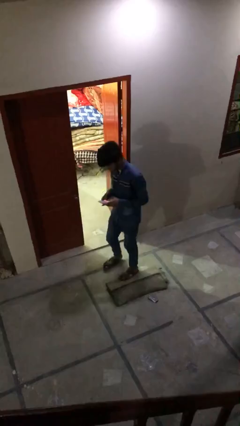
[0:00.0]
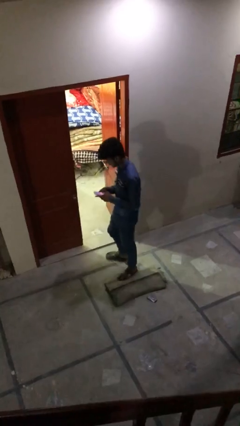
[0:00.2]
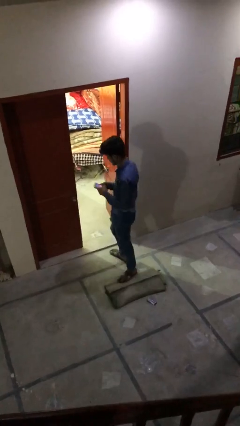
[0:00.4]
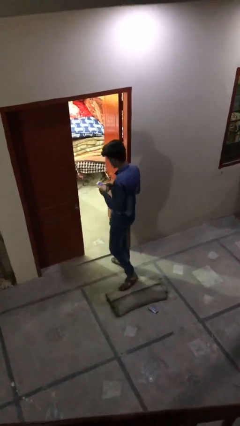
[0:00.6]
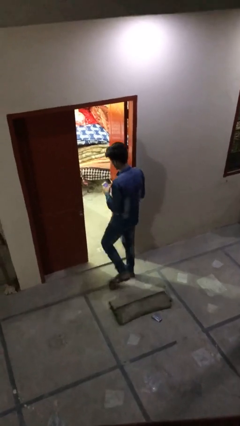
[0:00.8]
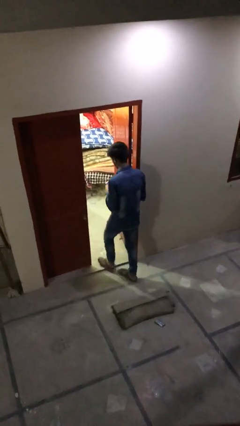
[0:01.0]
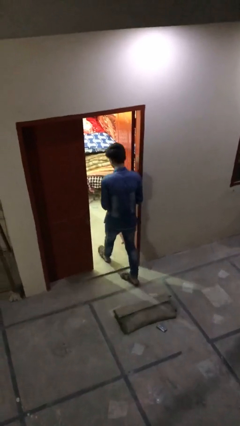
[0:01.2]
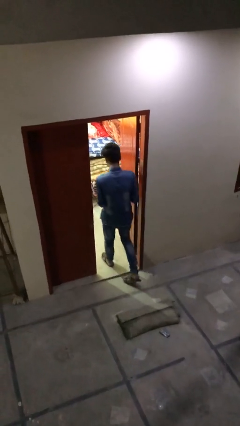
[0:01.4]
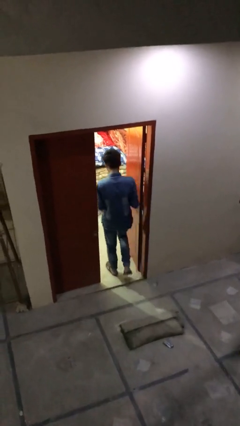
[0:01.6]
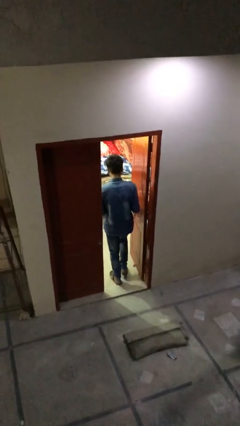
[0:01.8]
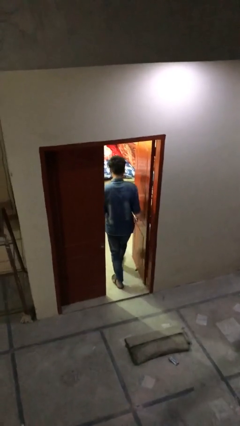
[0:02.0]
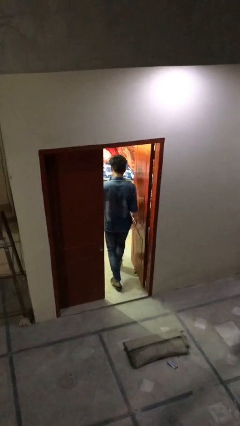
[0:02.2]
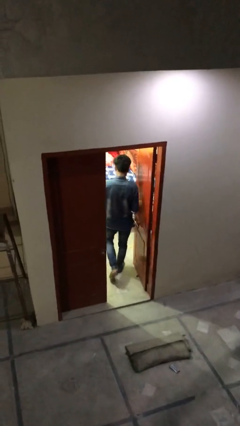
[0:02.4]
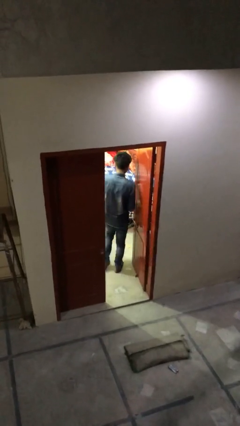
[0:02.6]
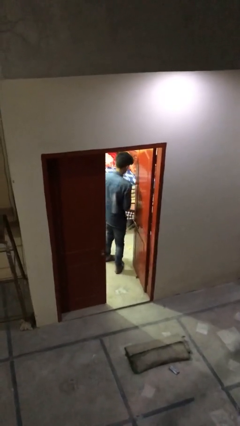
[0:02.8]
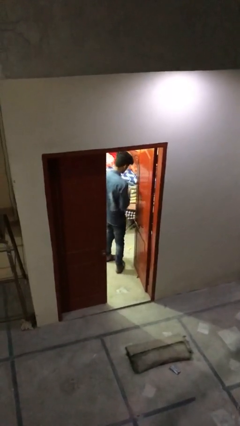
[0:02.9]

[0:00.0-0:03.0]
person exits scene through structure

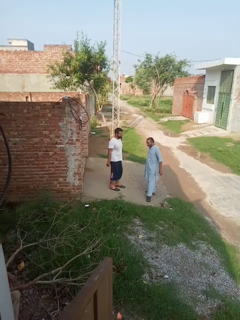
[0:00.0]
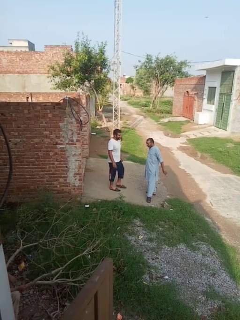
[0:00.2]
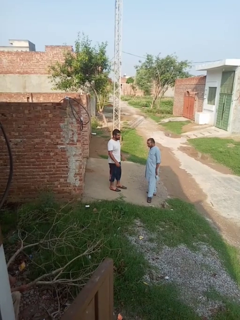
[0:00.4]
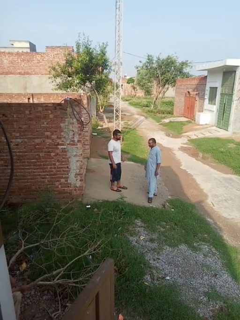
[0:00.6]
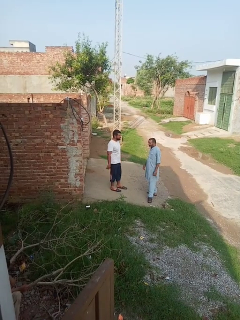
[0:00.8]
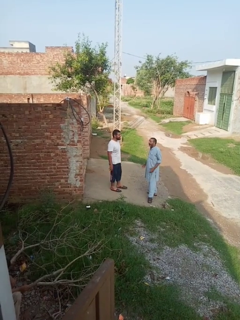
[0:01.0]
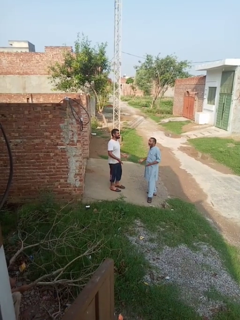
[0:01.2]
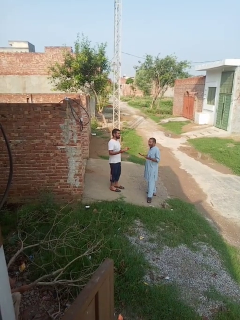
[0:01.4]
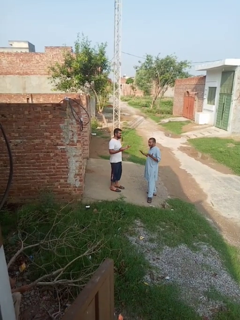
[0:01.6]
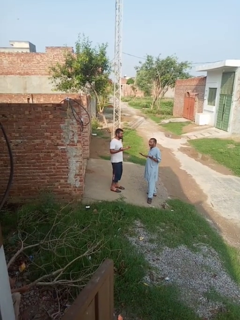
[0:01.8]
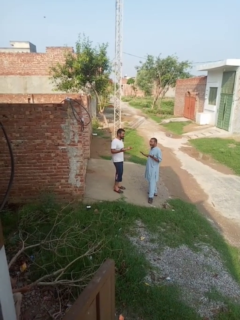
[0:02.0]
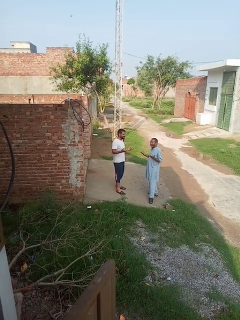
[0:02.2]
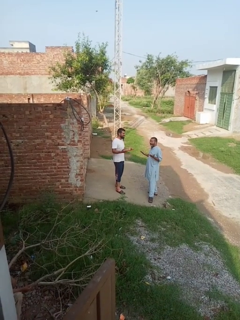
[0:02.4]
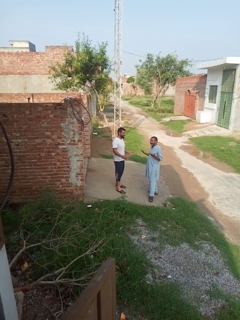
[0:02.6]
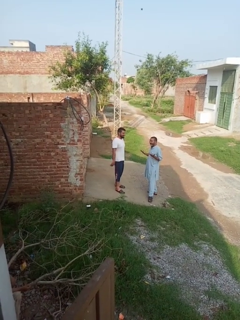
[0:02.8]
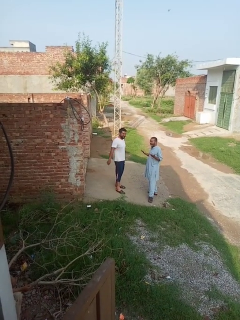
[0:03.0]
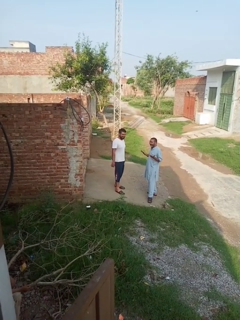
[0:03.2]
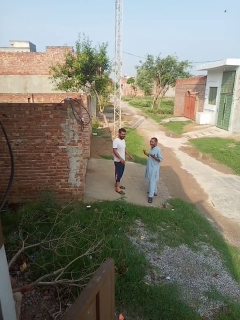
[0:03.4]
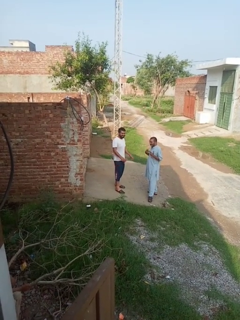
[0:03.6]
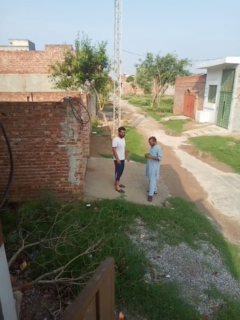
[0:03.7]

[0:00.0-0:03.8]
person laughs with person

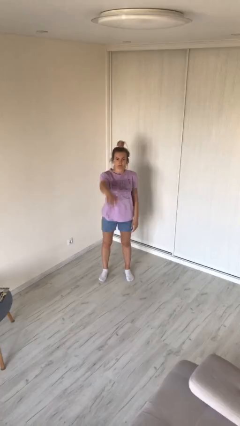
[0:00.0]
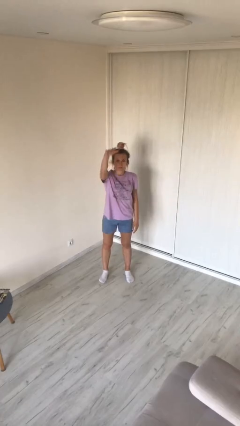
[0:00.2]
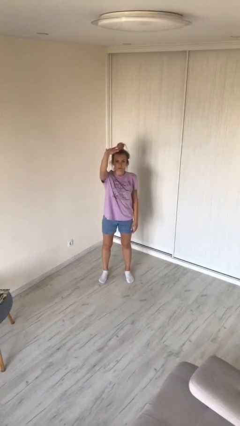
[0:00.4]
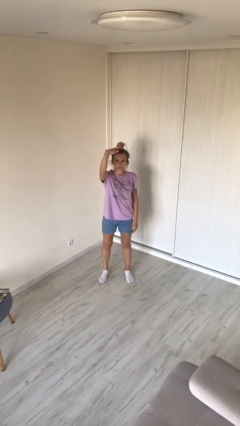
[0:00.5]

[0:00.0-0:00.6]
person gestures swipe up

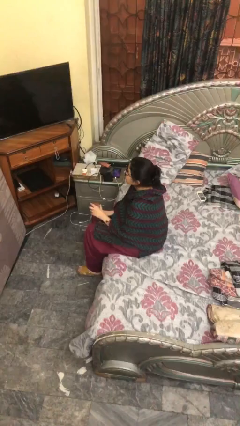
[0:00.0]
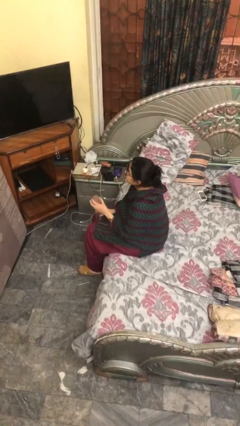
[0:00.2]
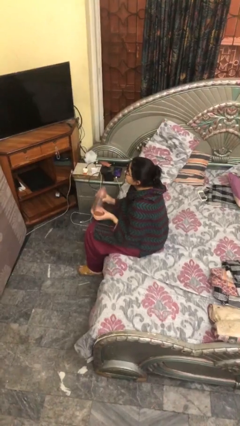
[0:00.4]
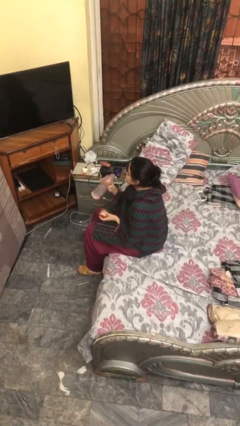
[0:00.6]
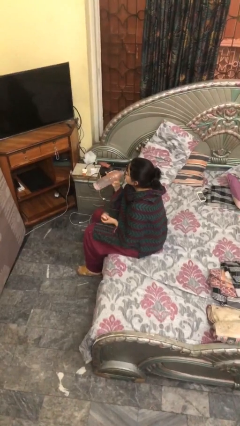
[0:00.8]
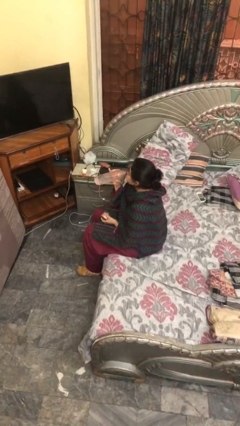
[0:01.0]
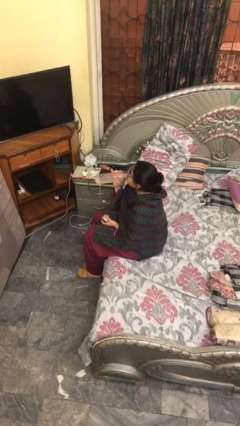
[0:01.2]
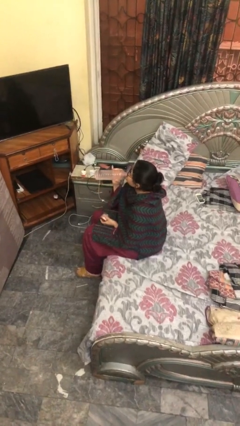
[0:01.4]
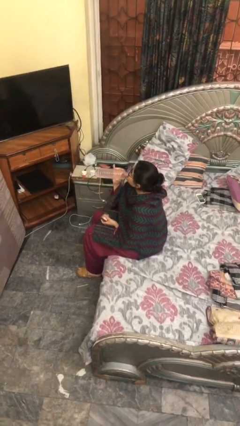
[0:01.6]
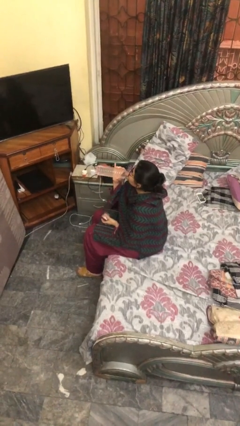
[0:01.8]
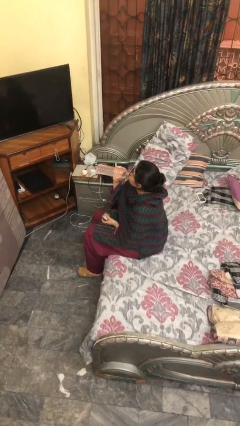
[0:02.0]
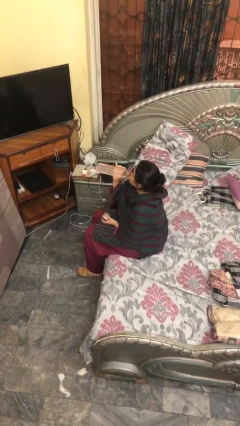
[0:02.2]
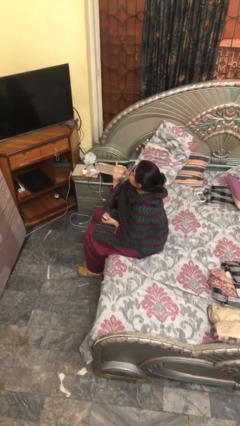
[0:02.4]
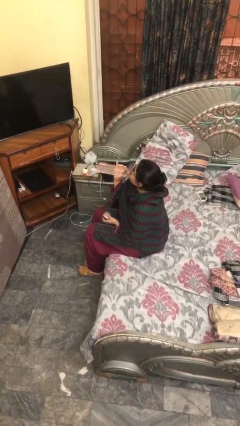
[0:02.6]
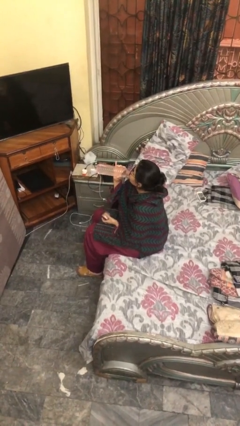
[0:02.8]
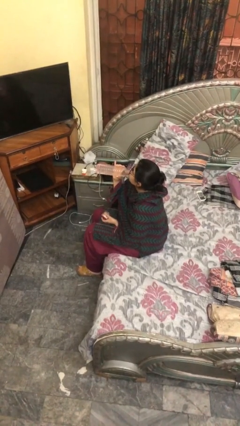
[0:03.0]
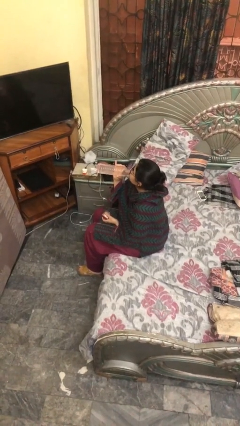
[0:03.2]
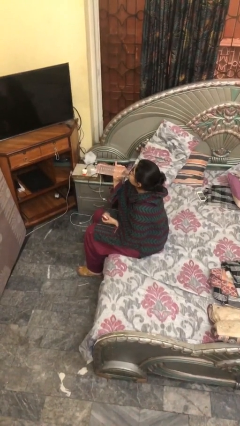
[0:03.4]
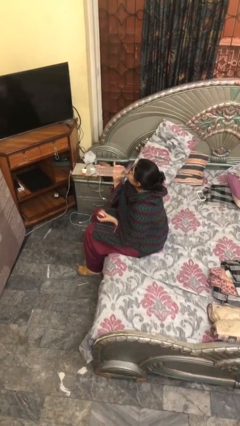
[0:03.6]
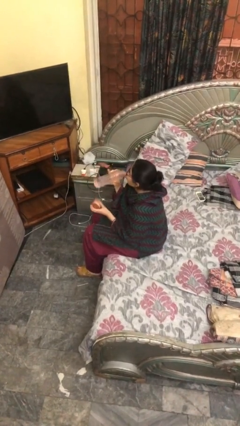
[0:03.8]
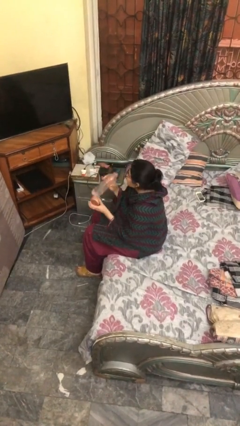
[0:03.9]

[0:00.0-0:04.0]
person drinks from bottle

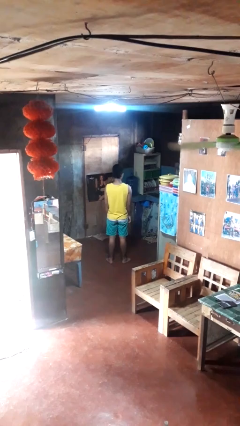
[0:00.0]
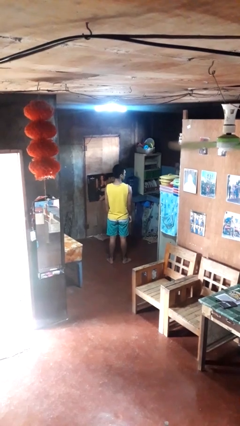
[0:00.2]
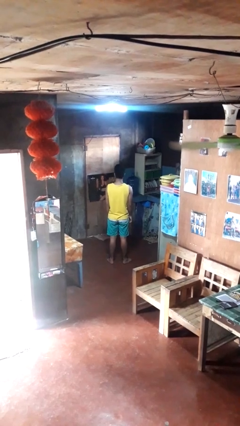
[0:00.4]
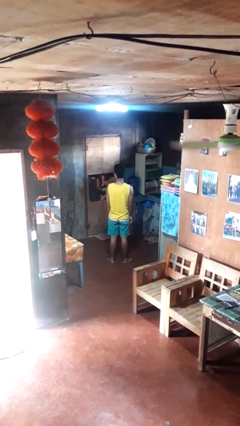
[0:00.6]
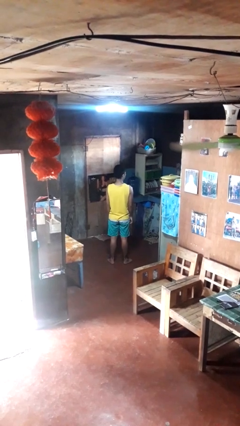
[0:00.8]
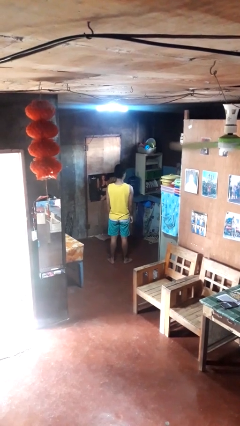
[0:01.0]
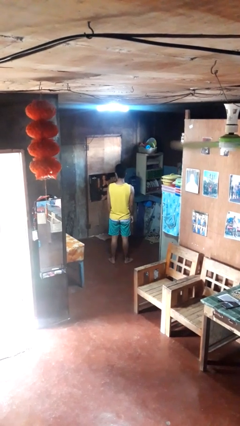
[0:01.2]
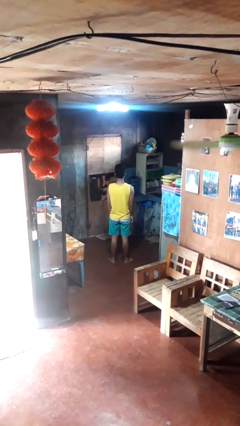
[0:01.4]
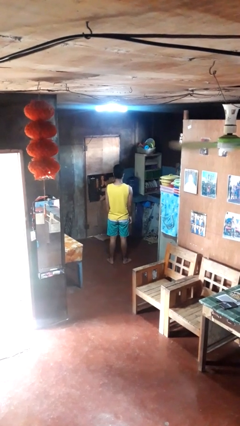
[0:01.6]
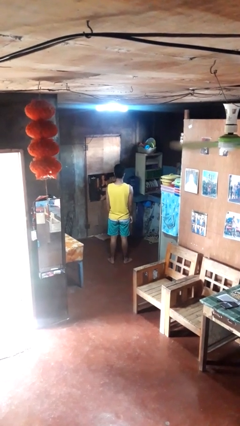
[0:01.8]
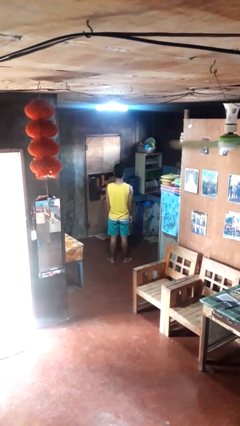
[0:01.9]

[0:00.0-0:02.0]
person shakes head

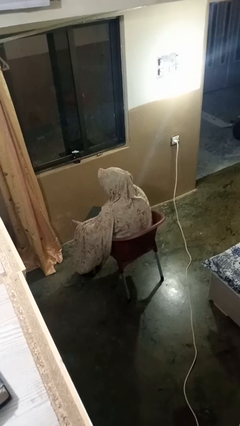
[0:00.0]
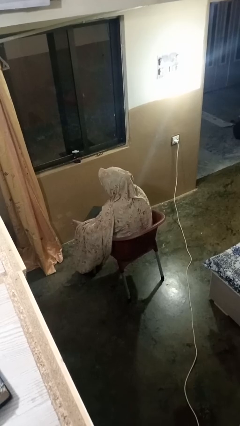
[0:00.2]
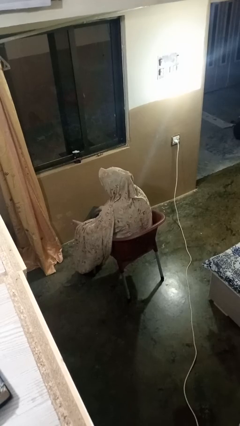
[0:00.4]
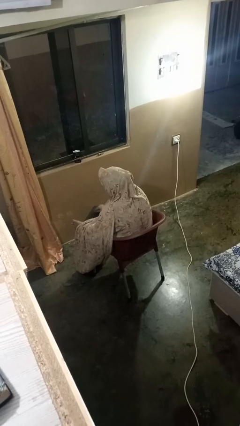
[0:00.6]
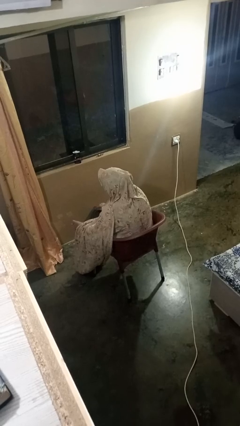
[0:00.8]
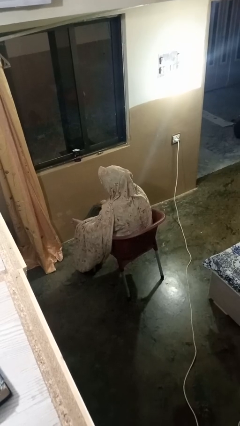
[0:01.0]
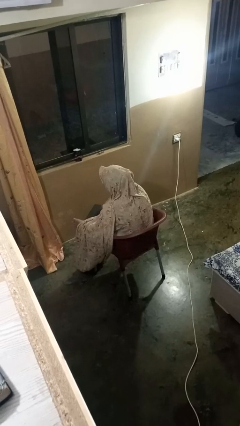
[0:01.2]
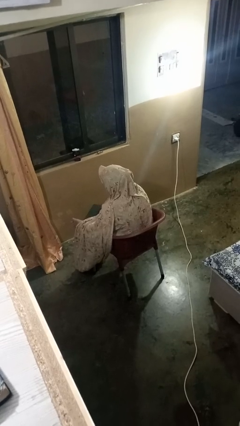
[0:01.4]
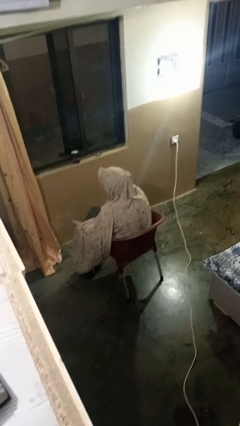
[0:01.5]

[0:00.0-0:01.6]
person interacts with tablet

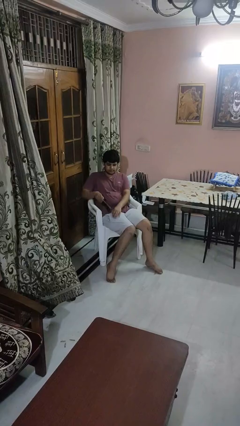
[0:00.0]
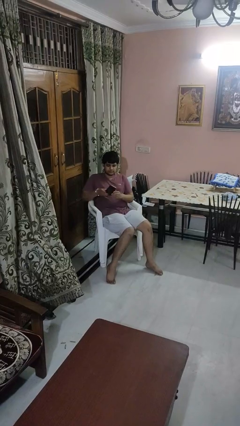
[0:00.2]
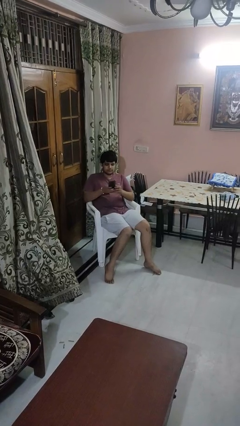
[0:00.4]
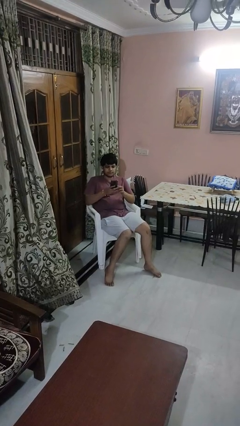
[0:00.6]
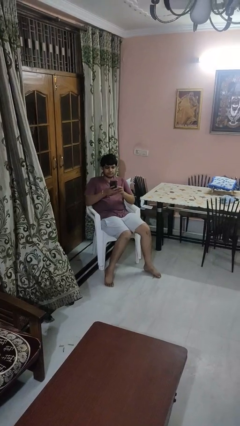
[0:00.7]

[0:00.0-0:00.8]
person takes phone from pocket

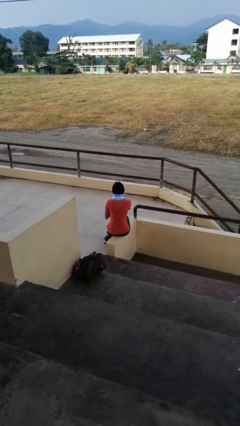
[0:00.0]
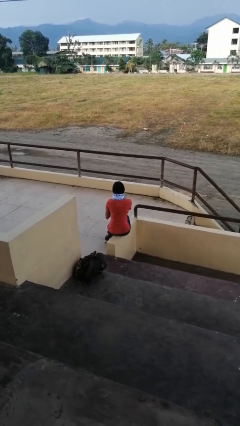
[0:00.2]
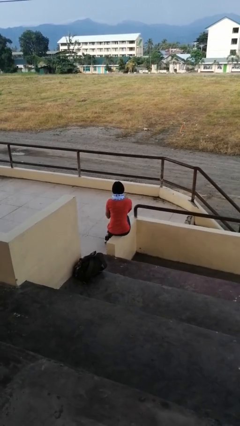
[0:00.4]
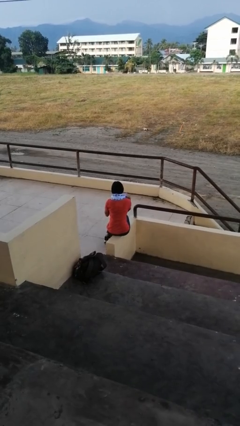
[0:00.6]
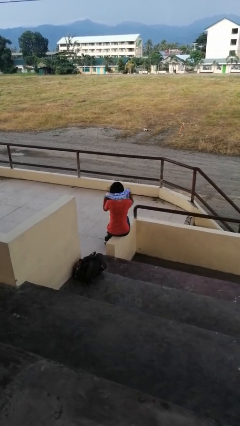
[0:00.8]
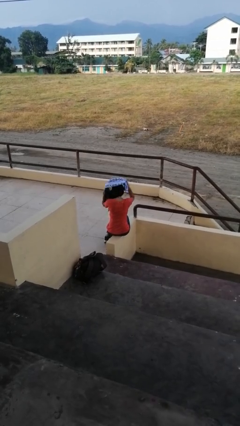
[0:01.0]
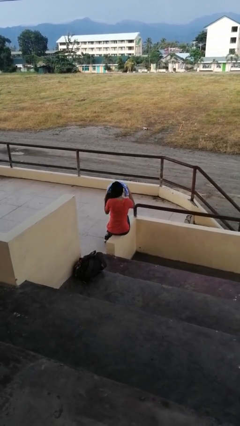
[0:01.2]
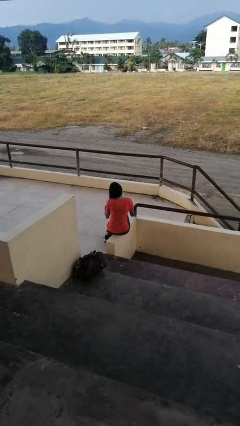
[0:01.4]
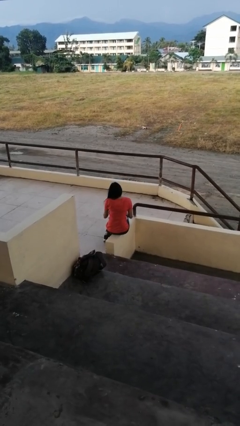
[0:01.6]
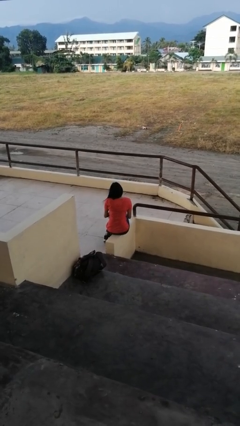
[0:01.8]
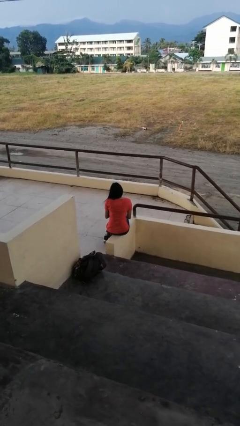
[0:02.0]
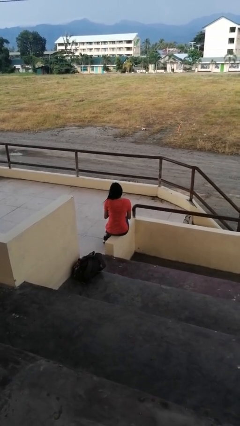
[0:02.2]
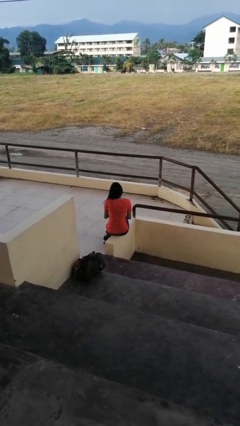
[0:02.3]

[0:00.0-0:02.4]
person takes off scarf
